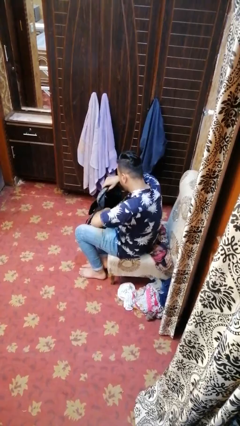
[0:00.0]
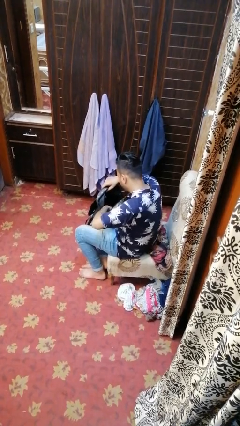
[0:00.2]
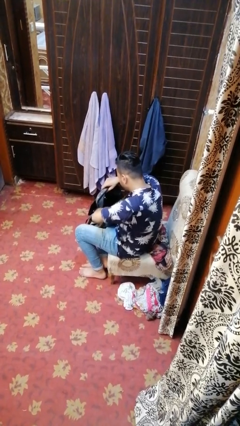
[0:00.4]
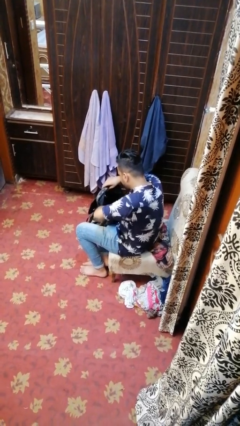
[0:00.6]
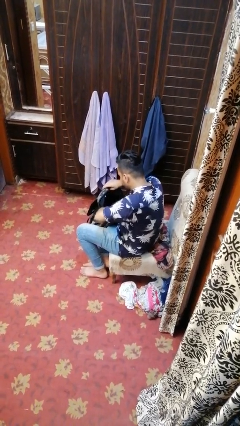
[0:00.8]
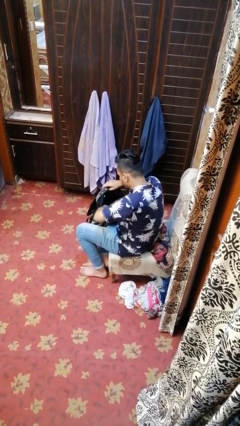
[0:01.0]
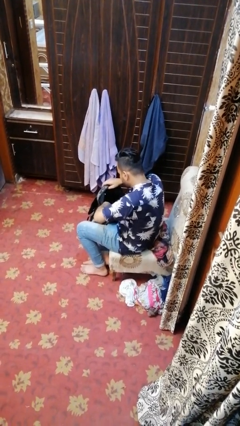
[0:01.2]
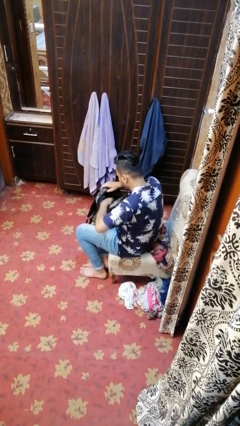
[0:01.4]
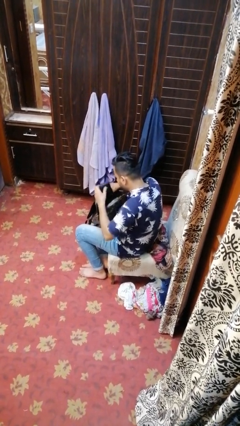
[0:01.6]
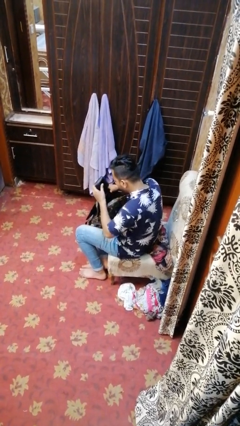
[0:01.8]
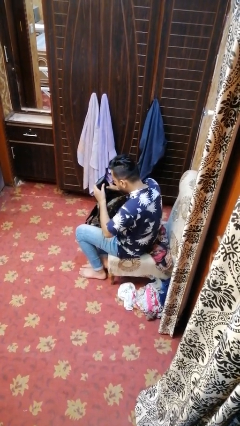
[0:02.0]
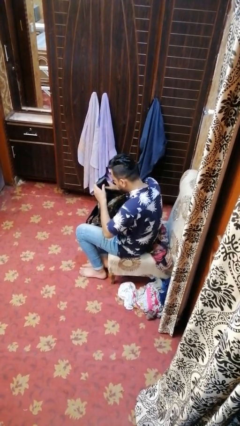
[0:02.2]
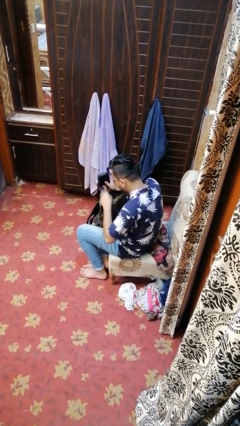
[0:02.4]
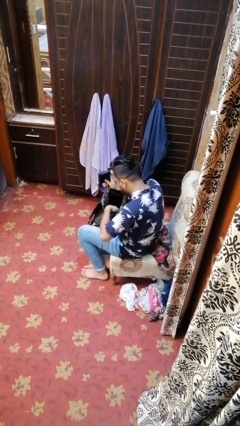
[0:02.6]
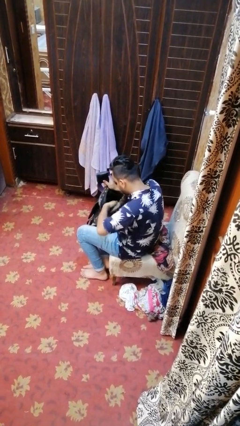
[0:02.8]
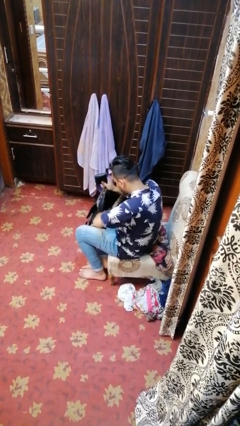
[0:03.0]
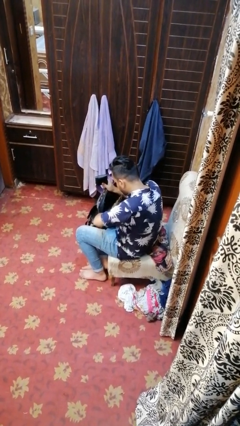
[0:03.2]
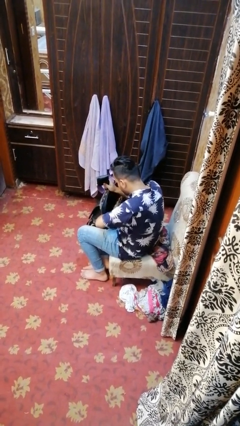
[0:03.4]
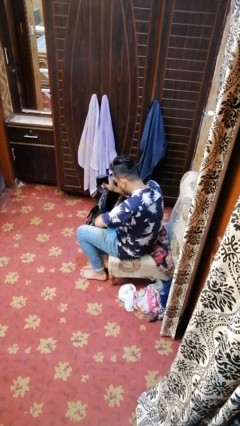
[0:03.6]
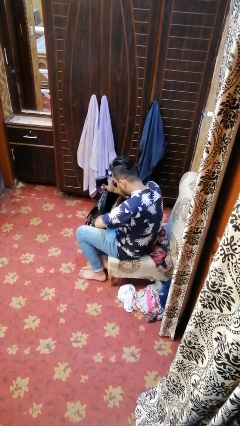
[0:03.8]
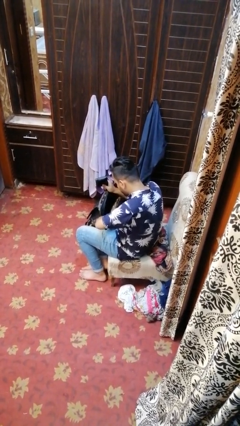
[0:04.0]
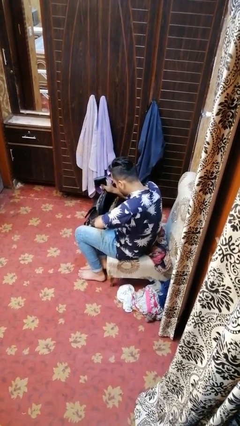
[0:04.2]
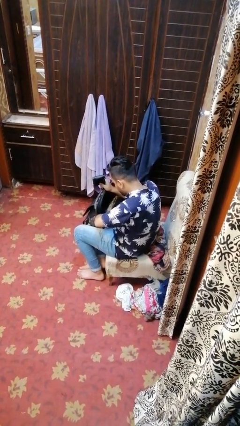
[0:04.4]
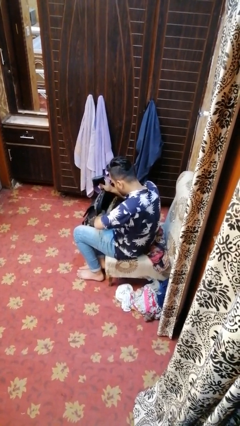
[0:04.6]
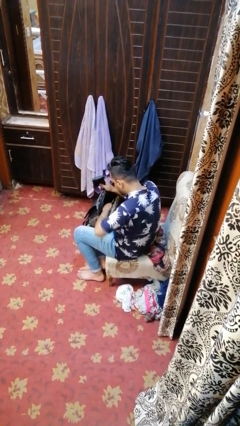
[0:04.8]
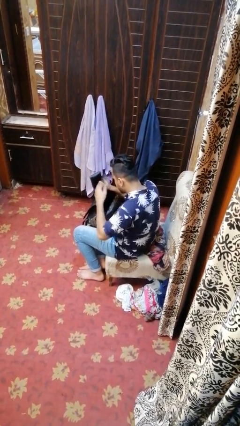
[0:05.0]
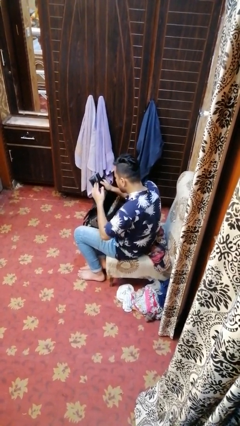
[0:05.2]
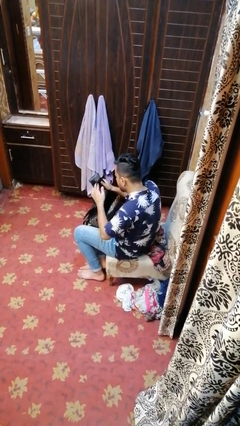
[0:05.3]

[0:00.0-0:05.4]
person takes object from backpack

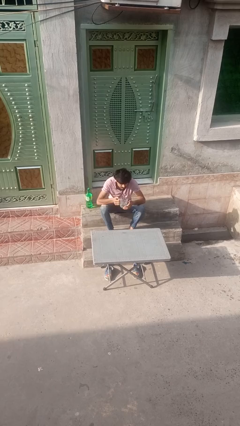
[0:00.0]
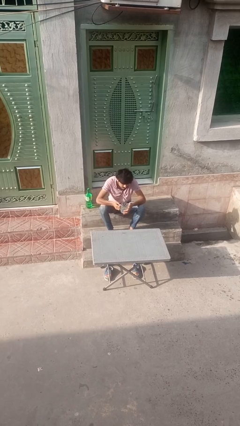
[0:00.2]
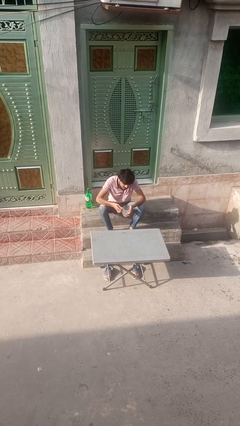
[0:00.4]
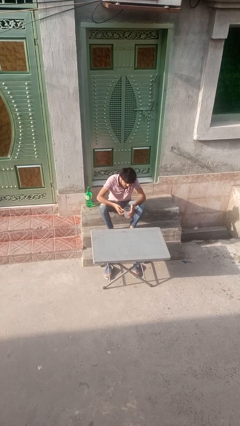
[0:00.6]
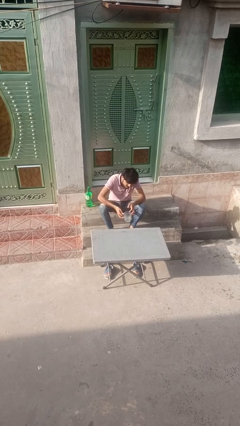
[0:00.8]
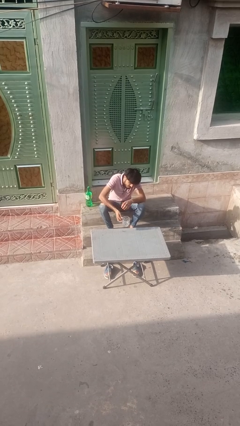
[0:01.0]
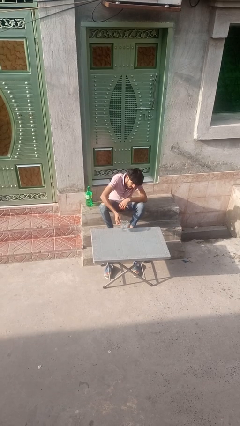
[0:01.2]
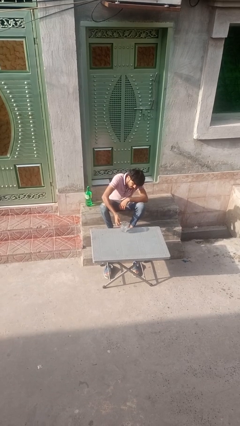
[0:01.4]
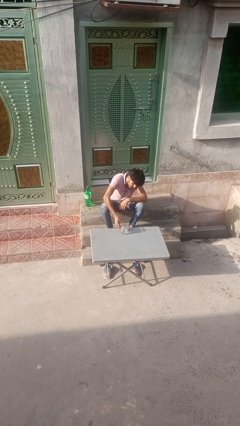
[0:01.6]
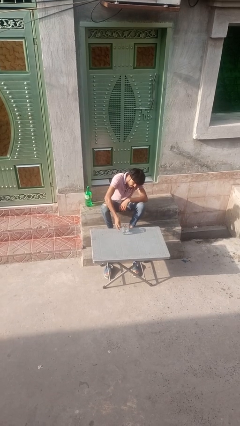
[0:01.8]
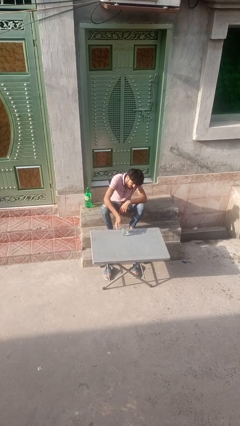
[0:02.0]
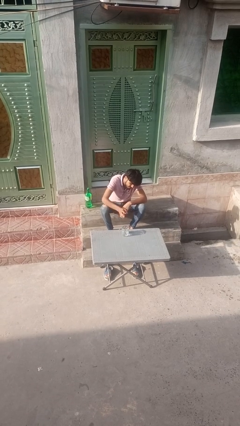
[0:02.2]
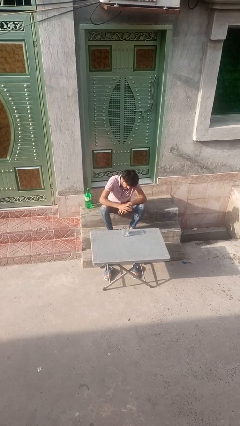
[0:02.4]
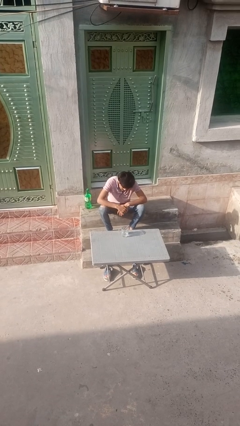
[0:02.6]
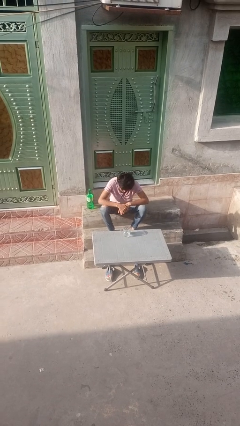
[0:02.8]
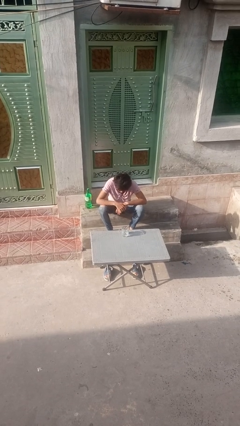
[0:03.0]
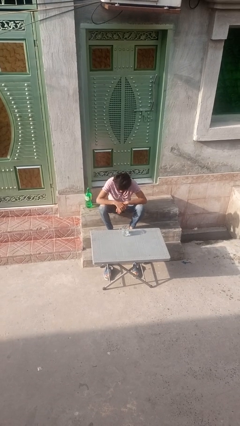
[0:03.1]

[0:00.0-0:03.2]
person puts down object on table

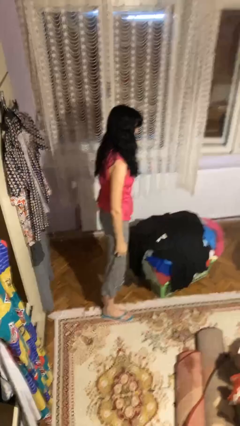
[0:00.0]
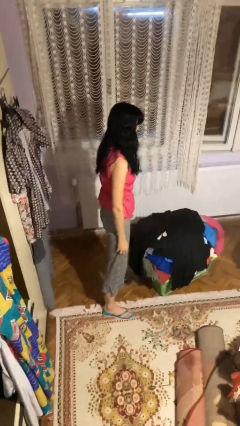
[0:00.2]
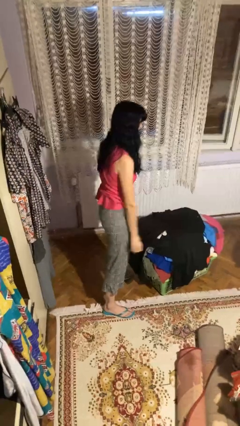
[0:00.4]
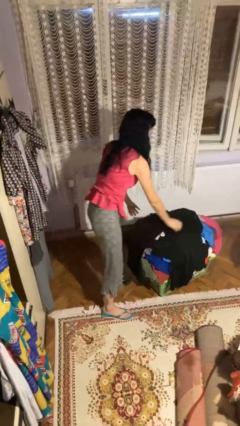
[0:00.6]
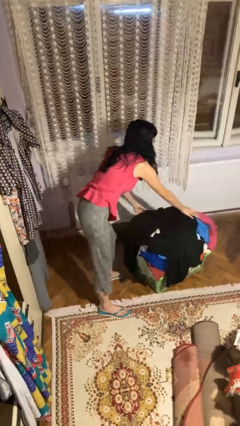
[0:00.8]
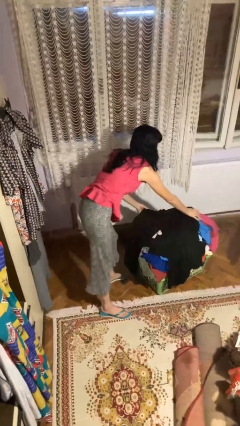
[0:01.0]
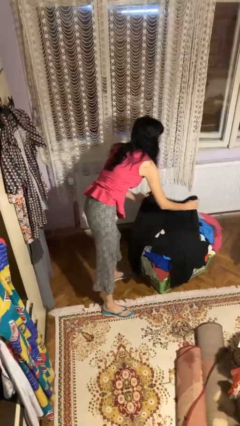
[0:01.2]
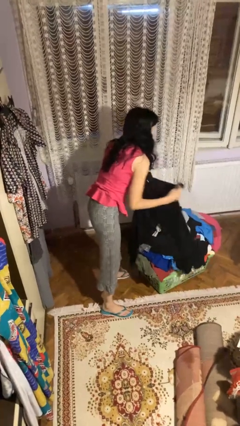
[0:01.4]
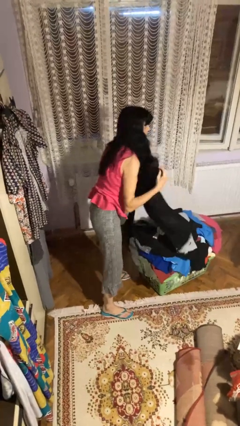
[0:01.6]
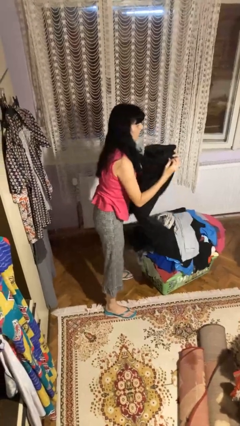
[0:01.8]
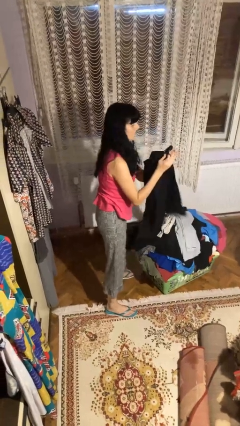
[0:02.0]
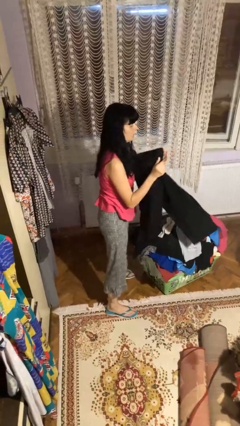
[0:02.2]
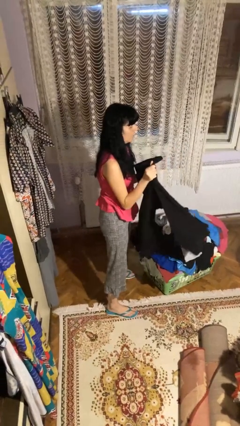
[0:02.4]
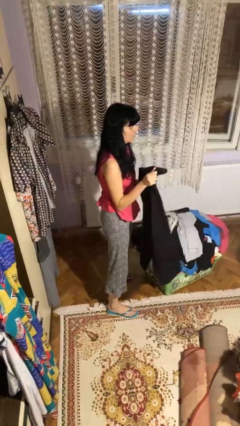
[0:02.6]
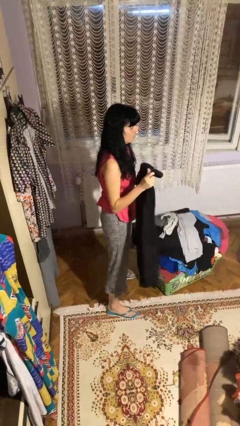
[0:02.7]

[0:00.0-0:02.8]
person folds pants

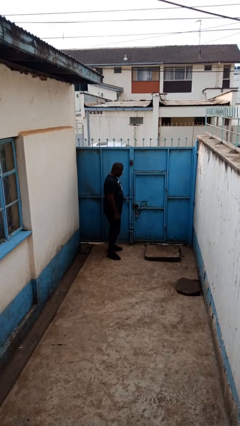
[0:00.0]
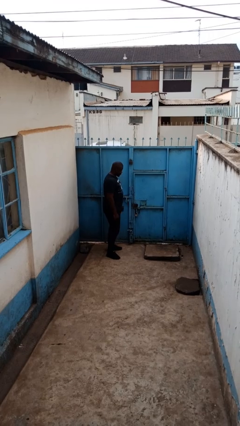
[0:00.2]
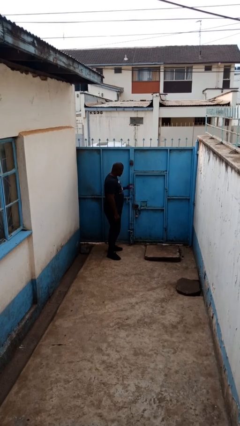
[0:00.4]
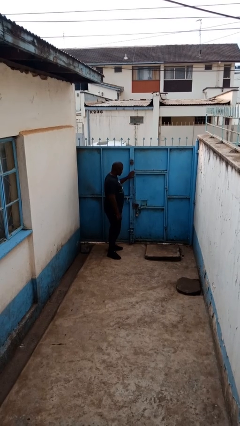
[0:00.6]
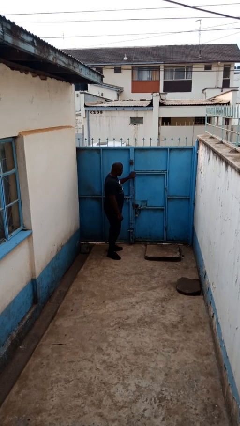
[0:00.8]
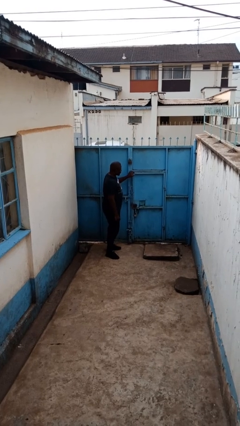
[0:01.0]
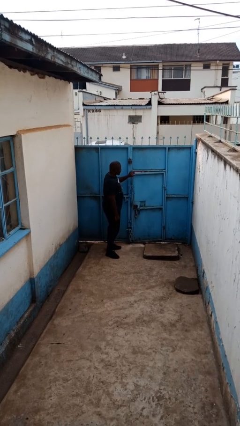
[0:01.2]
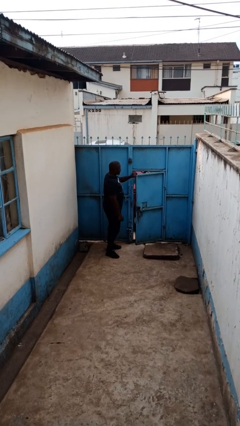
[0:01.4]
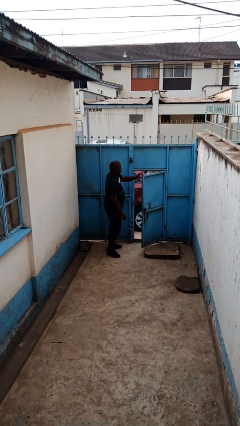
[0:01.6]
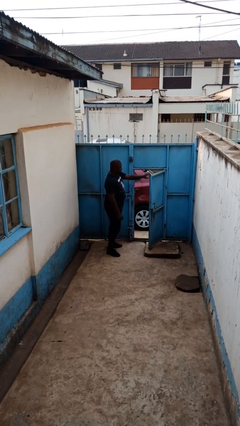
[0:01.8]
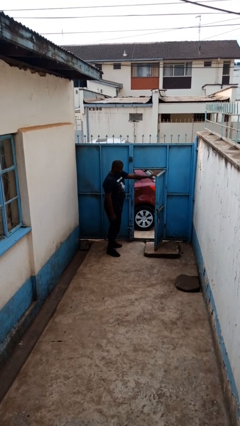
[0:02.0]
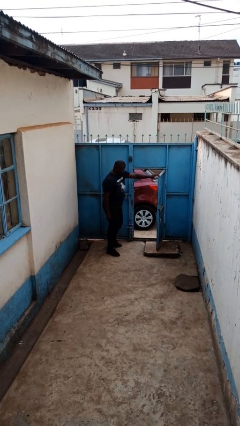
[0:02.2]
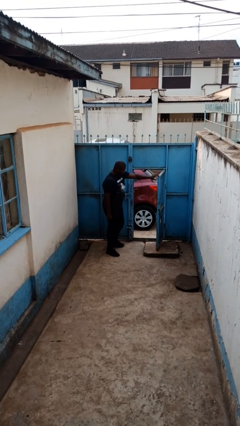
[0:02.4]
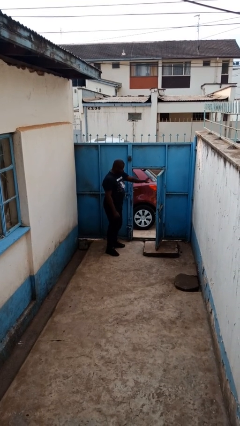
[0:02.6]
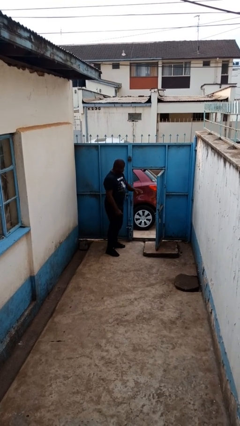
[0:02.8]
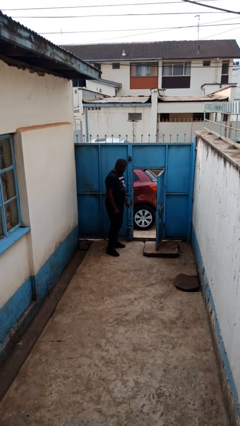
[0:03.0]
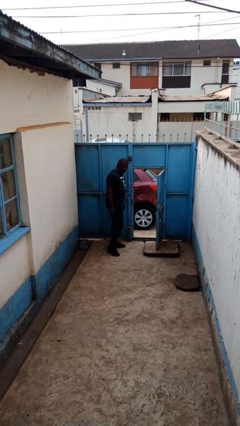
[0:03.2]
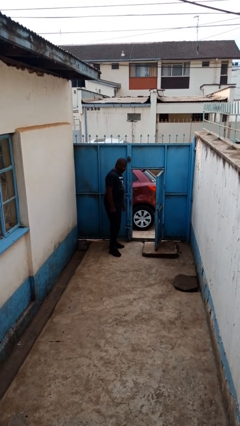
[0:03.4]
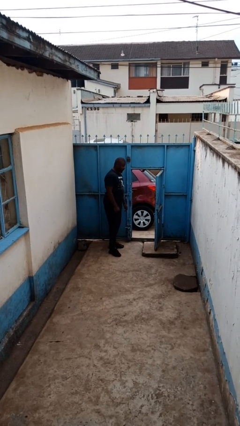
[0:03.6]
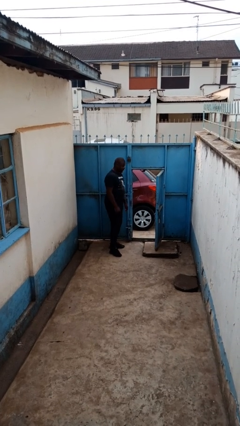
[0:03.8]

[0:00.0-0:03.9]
person opens gate

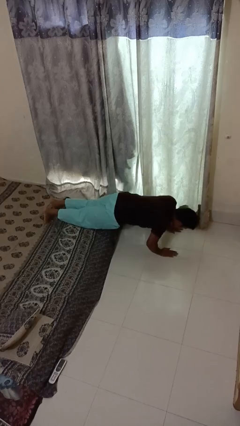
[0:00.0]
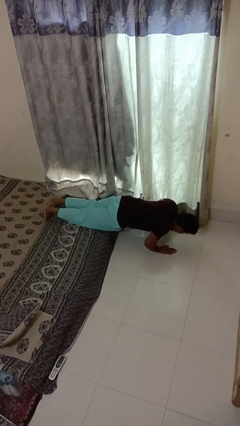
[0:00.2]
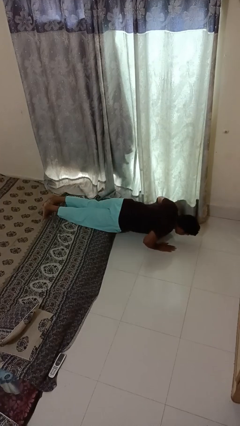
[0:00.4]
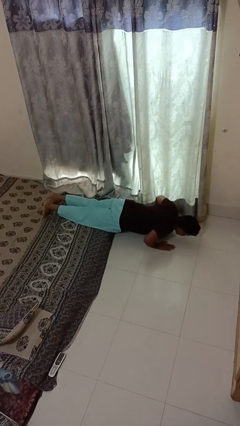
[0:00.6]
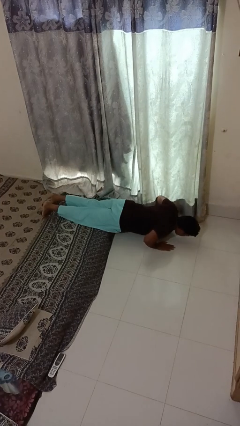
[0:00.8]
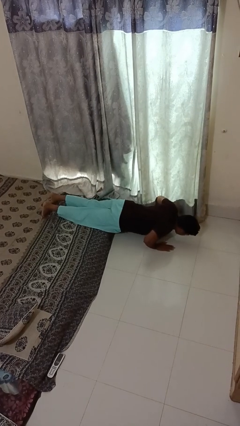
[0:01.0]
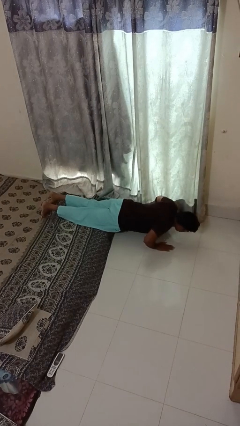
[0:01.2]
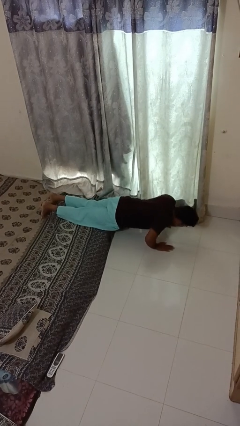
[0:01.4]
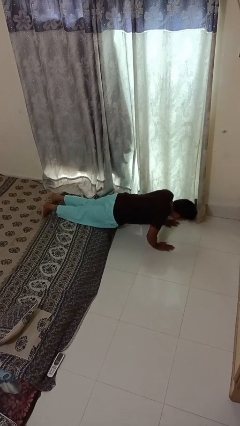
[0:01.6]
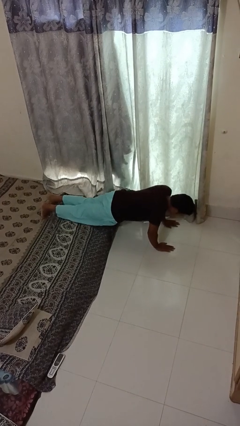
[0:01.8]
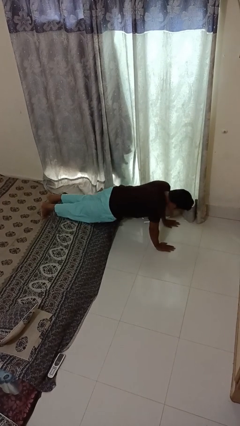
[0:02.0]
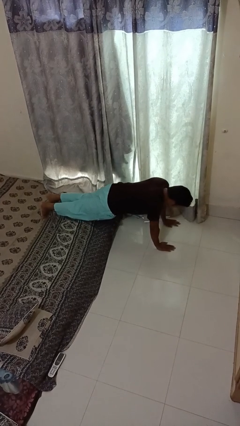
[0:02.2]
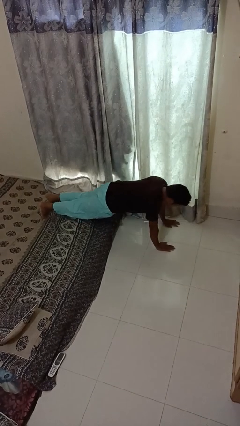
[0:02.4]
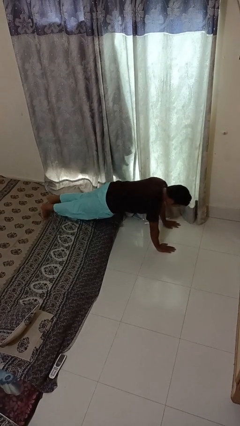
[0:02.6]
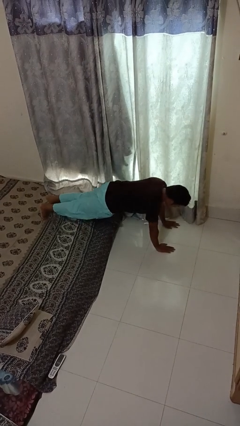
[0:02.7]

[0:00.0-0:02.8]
person exercises with pushup
